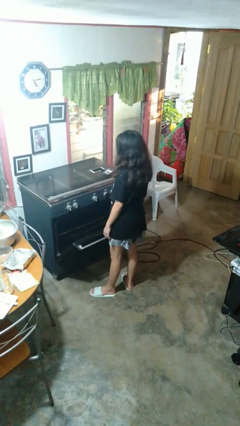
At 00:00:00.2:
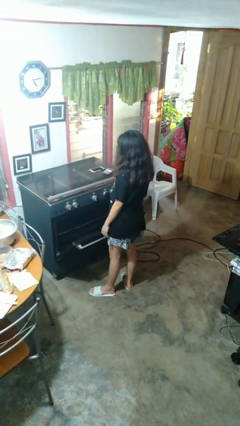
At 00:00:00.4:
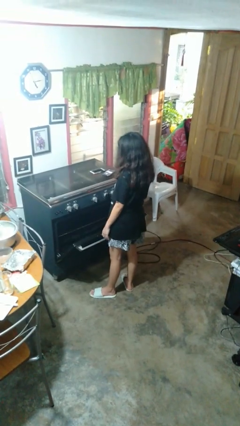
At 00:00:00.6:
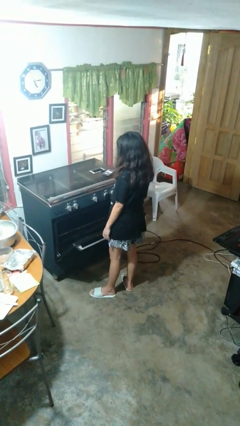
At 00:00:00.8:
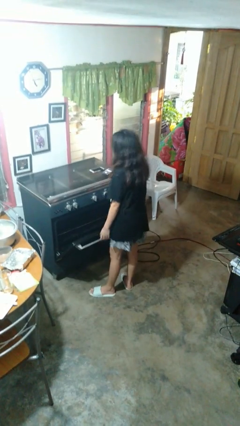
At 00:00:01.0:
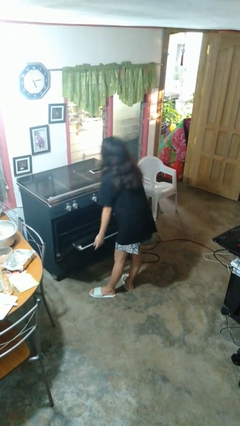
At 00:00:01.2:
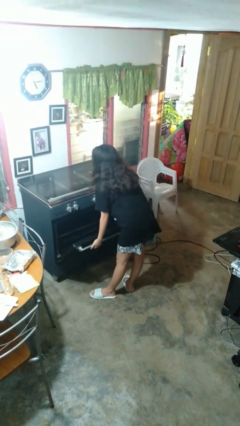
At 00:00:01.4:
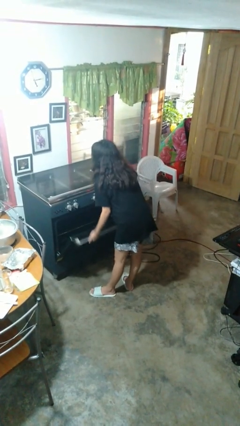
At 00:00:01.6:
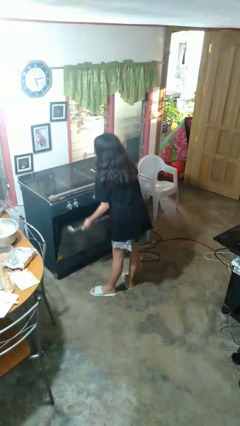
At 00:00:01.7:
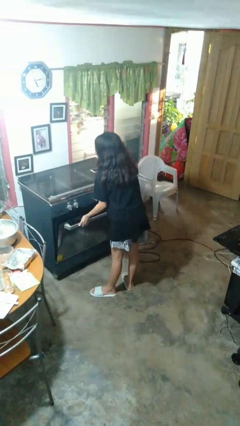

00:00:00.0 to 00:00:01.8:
person closes oven door

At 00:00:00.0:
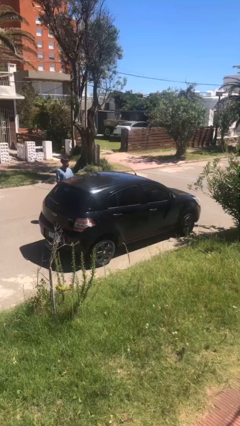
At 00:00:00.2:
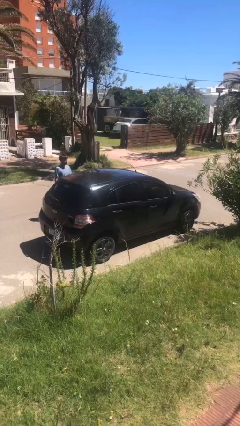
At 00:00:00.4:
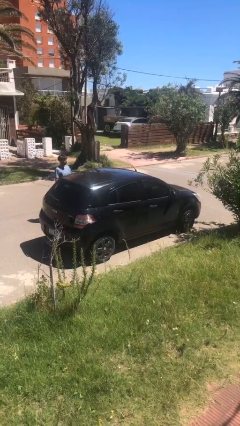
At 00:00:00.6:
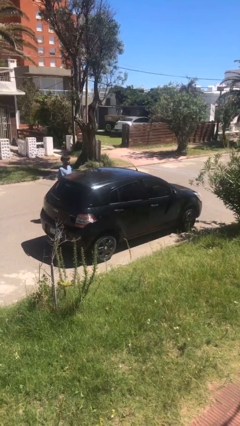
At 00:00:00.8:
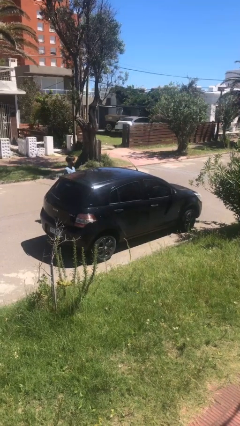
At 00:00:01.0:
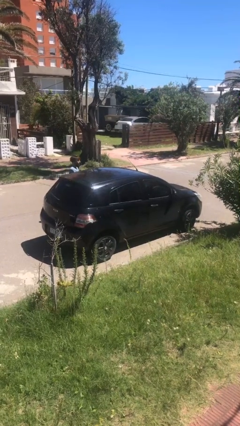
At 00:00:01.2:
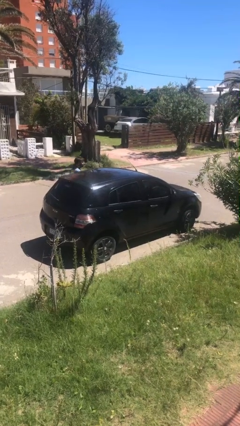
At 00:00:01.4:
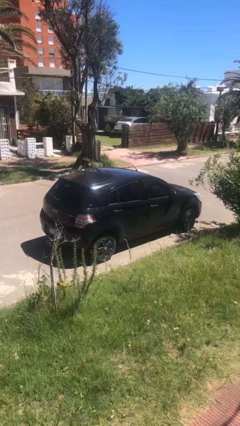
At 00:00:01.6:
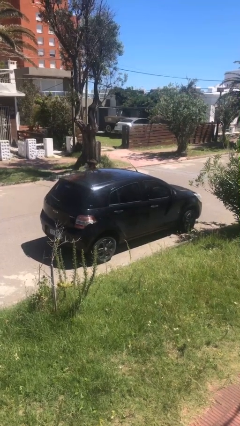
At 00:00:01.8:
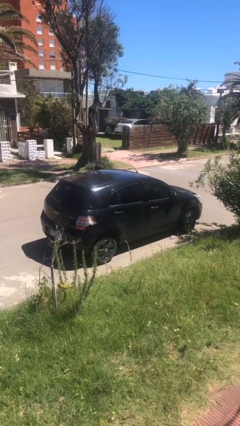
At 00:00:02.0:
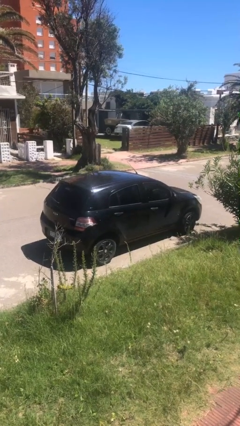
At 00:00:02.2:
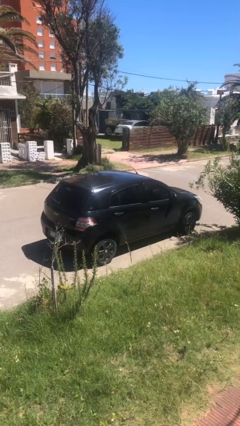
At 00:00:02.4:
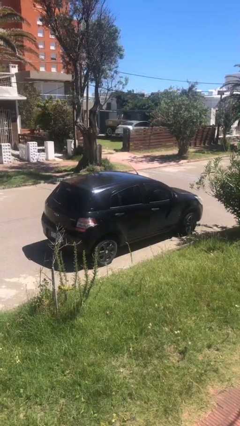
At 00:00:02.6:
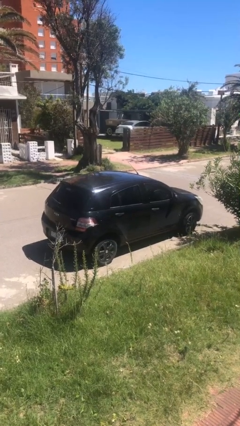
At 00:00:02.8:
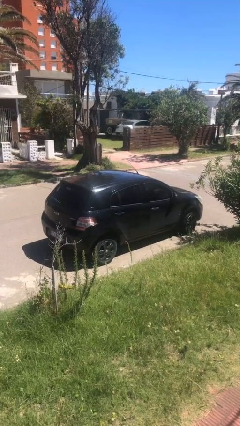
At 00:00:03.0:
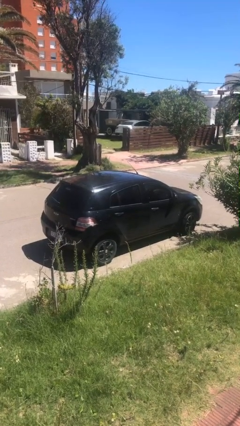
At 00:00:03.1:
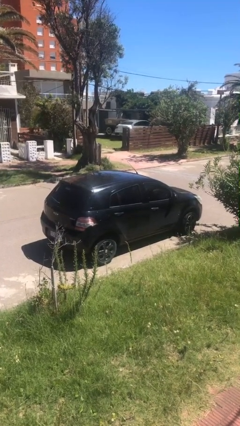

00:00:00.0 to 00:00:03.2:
car picks up person

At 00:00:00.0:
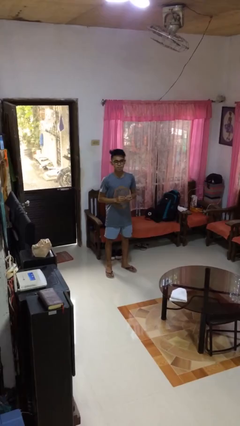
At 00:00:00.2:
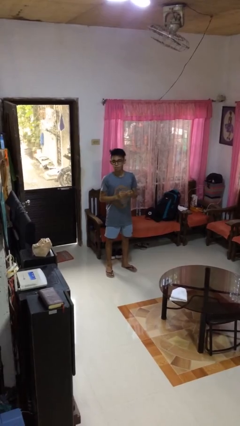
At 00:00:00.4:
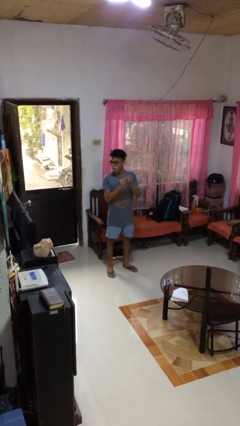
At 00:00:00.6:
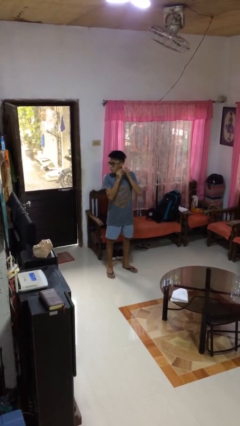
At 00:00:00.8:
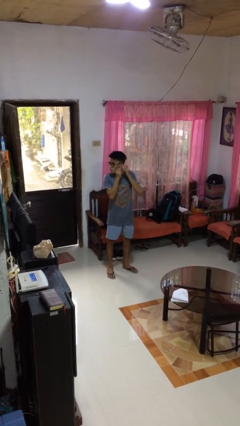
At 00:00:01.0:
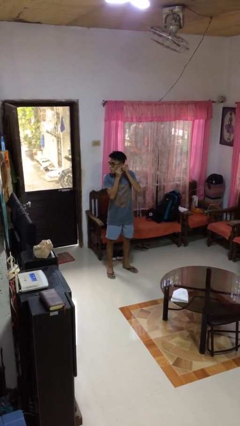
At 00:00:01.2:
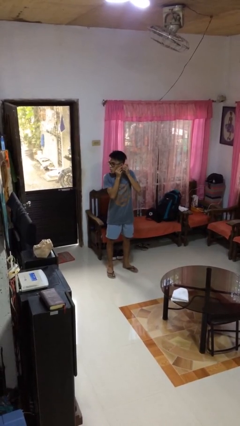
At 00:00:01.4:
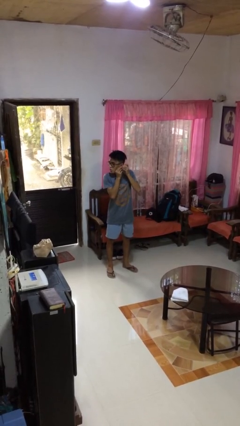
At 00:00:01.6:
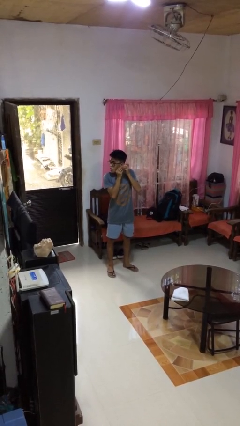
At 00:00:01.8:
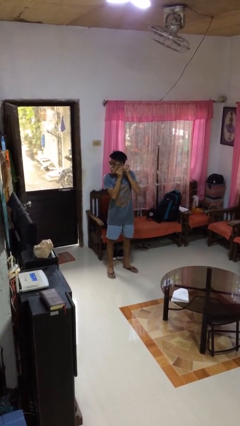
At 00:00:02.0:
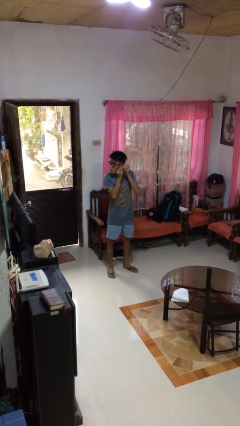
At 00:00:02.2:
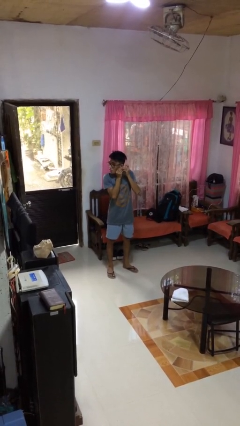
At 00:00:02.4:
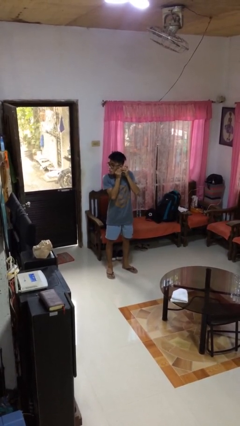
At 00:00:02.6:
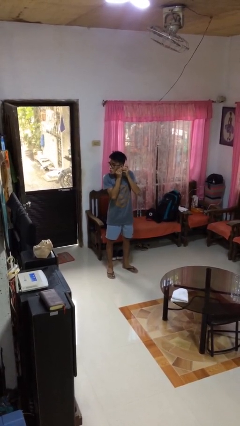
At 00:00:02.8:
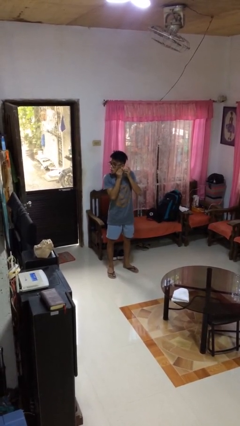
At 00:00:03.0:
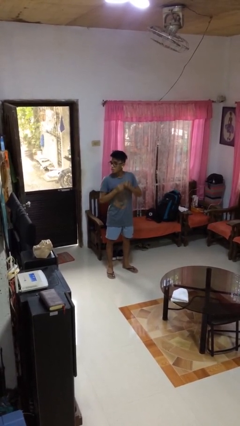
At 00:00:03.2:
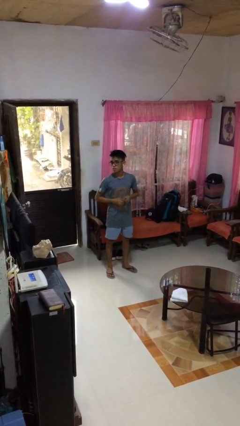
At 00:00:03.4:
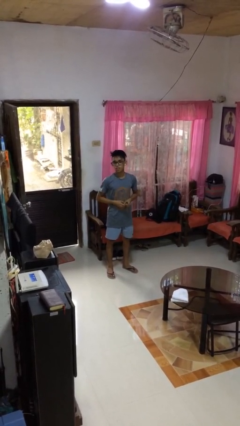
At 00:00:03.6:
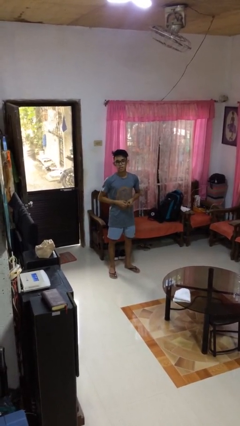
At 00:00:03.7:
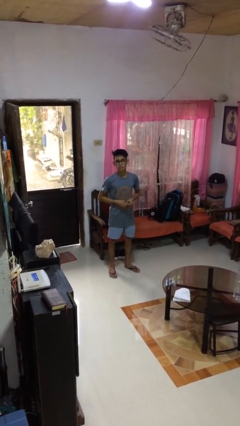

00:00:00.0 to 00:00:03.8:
person puts on earrings

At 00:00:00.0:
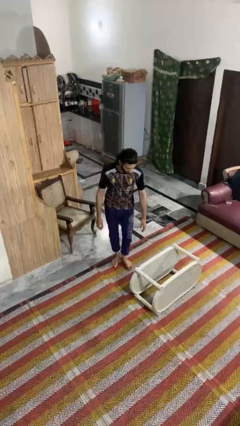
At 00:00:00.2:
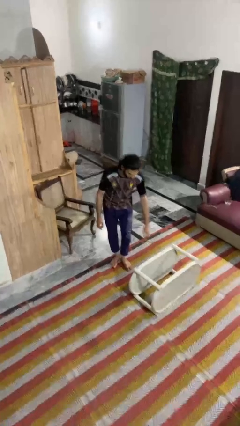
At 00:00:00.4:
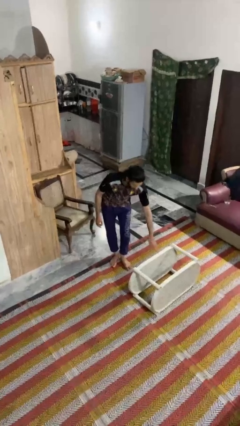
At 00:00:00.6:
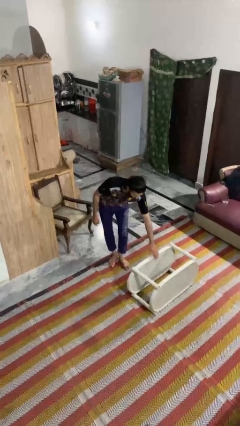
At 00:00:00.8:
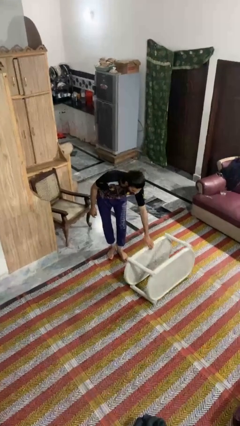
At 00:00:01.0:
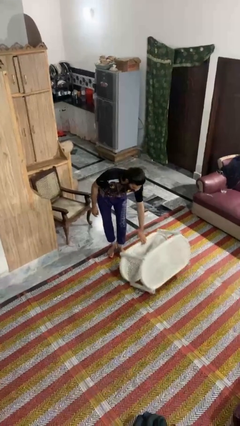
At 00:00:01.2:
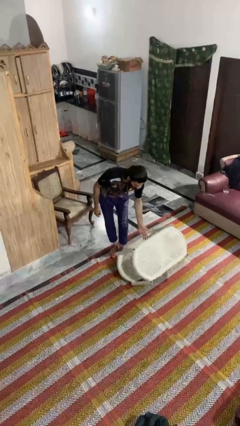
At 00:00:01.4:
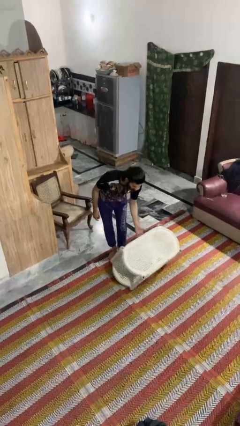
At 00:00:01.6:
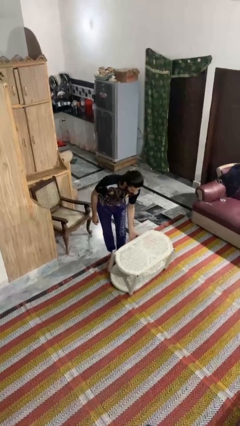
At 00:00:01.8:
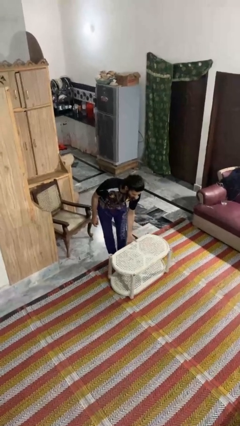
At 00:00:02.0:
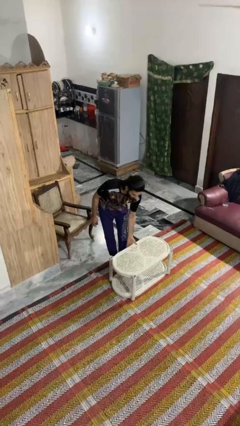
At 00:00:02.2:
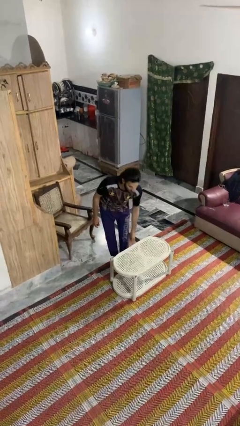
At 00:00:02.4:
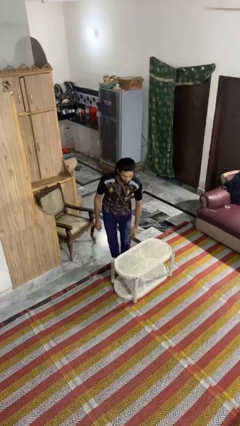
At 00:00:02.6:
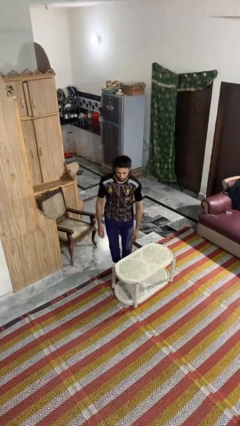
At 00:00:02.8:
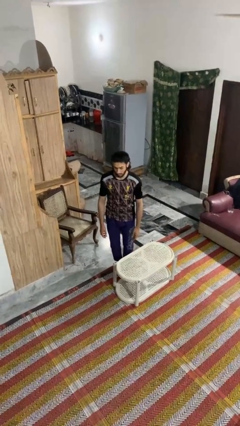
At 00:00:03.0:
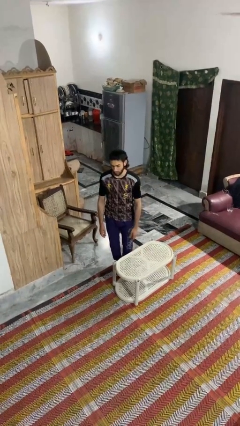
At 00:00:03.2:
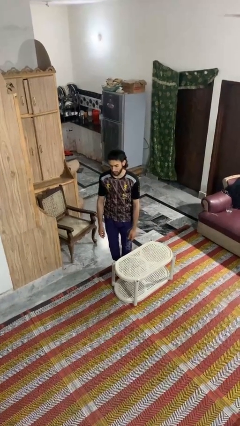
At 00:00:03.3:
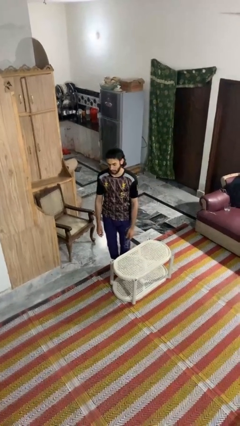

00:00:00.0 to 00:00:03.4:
person sets upright furniture

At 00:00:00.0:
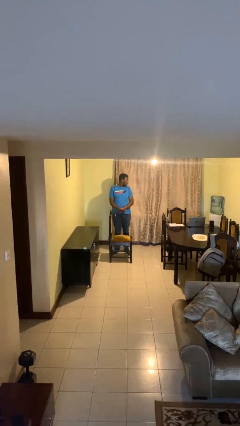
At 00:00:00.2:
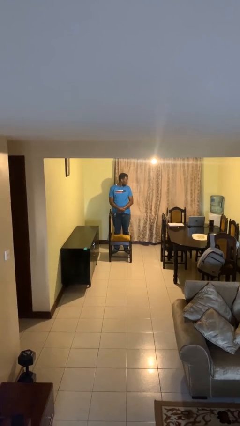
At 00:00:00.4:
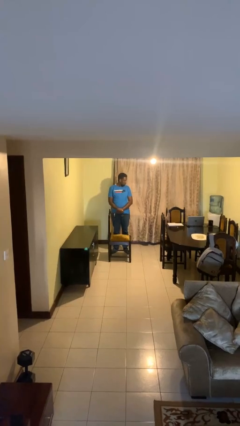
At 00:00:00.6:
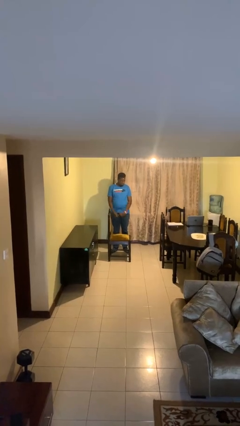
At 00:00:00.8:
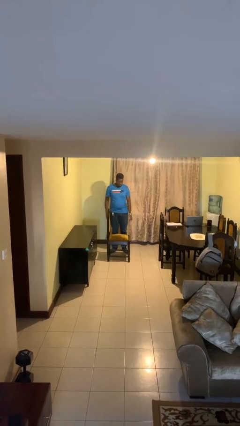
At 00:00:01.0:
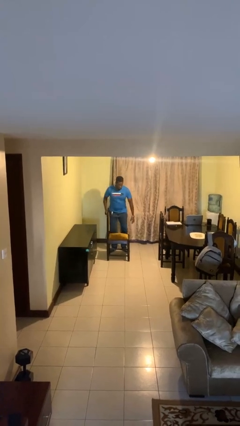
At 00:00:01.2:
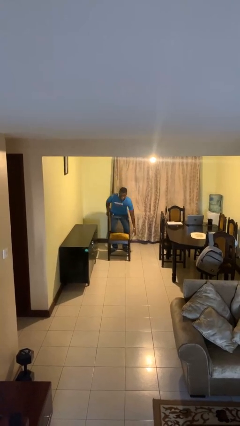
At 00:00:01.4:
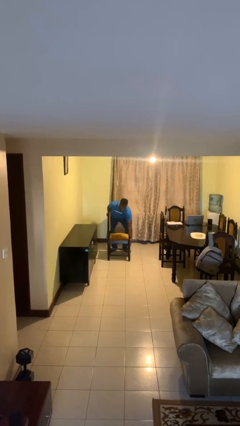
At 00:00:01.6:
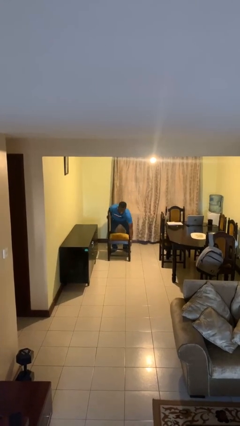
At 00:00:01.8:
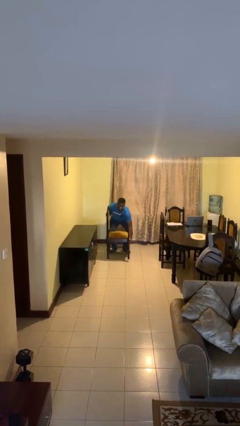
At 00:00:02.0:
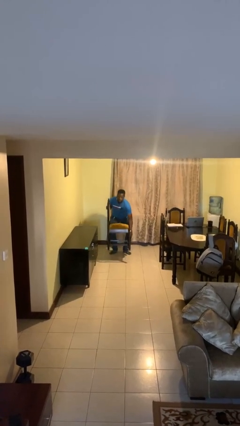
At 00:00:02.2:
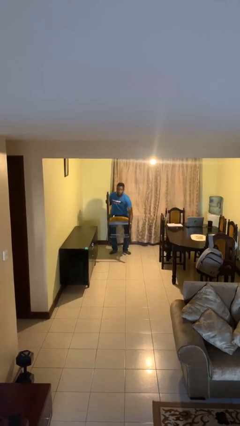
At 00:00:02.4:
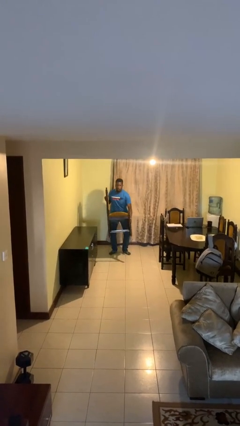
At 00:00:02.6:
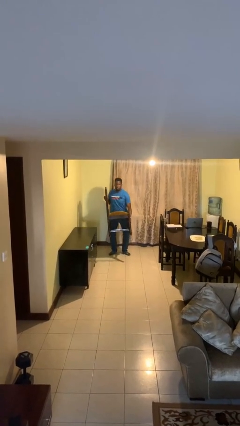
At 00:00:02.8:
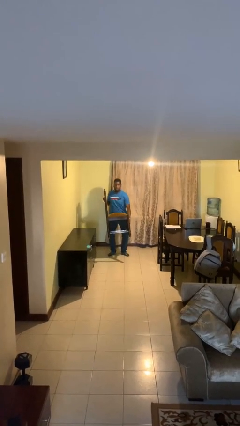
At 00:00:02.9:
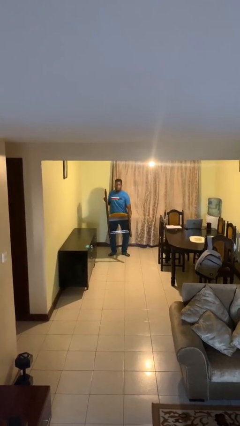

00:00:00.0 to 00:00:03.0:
person picks up object from floor

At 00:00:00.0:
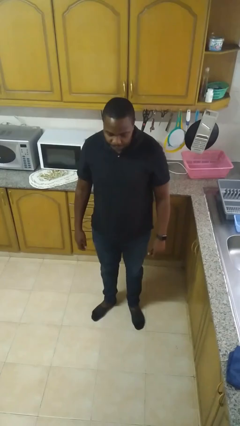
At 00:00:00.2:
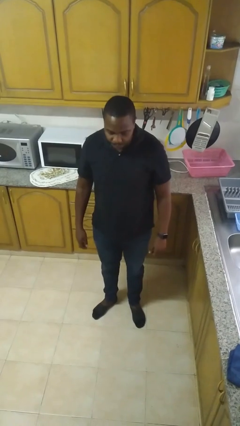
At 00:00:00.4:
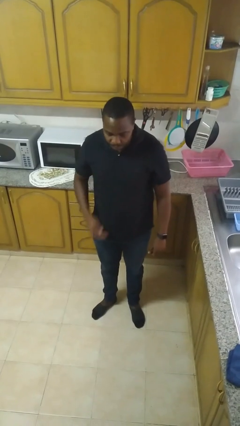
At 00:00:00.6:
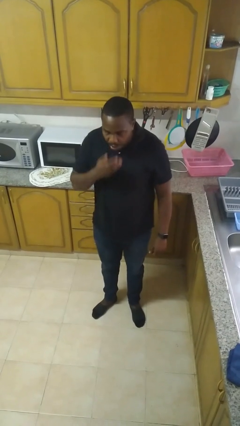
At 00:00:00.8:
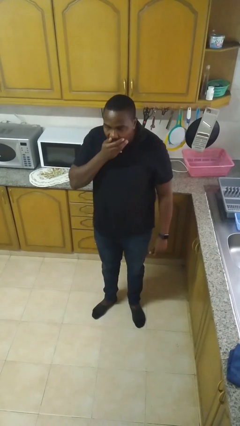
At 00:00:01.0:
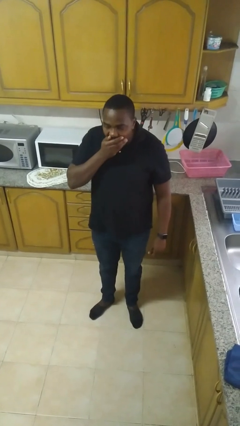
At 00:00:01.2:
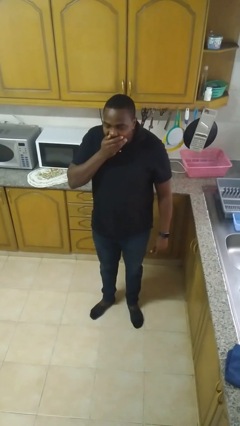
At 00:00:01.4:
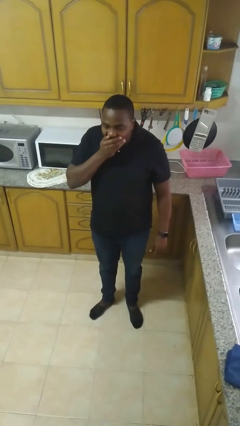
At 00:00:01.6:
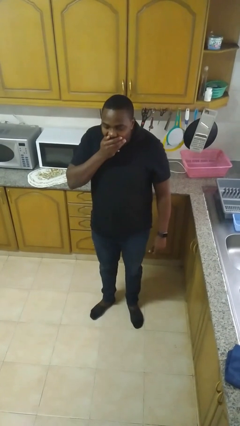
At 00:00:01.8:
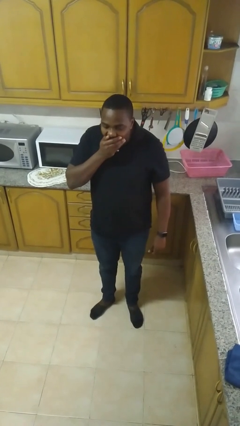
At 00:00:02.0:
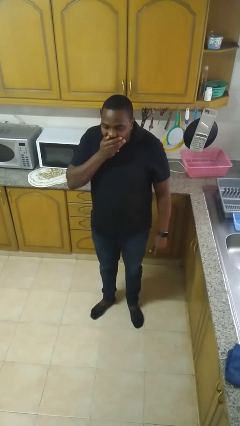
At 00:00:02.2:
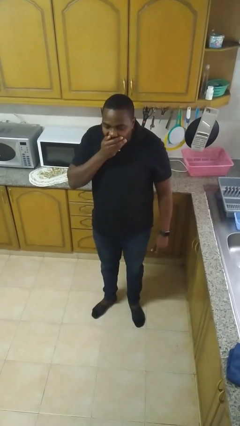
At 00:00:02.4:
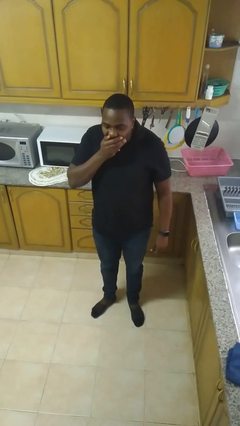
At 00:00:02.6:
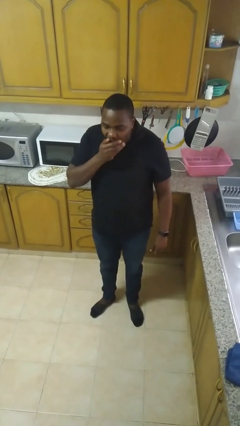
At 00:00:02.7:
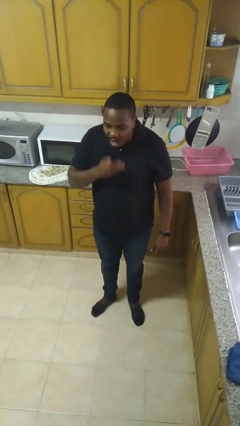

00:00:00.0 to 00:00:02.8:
person yawns
